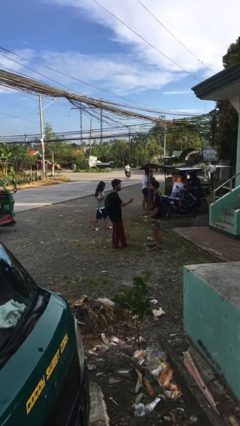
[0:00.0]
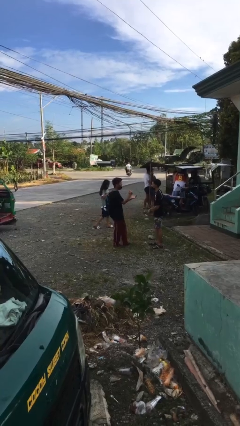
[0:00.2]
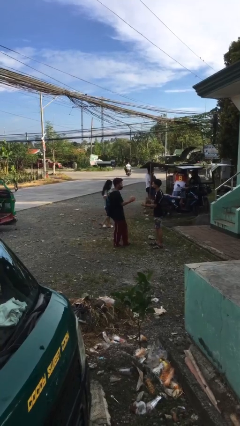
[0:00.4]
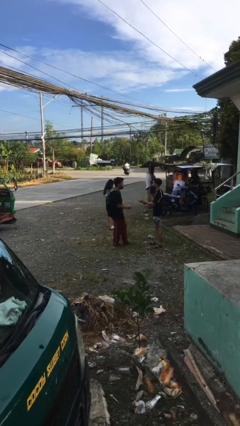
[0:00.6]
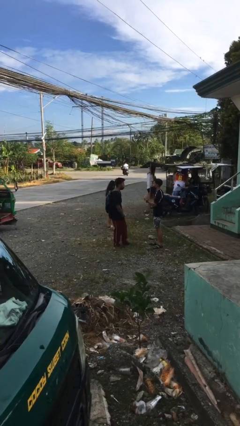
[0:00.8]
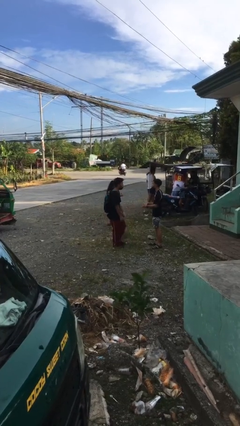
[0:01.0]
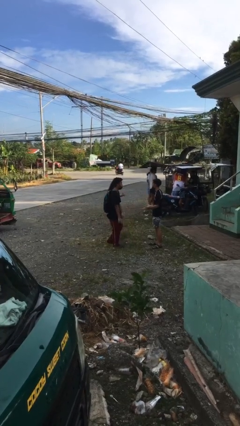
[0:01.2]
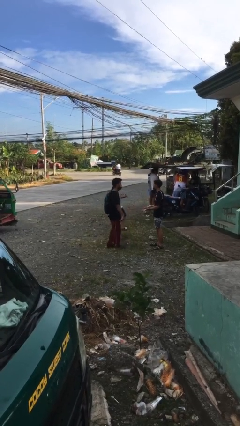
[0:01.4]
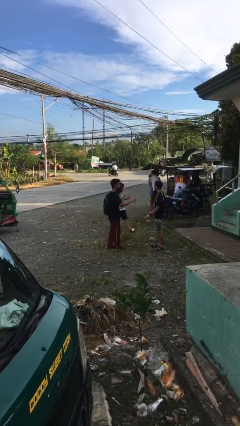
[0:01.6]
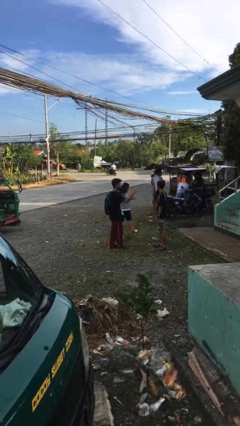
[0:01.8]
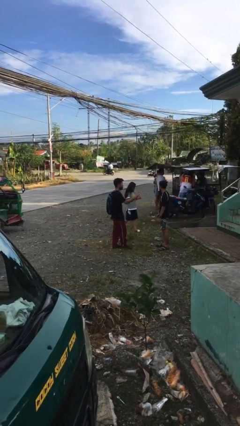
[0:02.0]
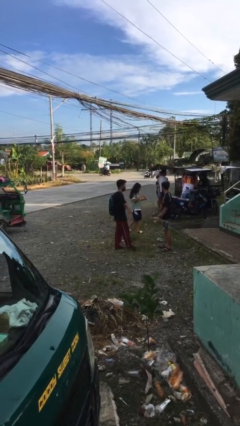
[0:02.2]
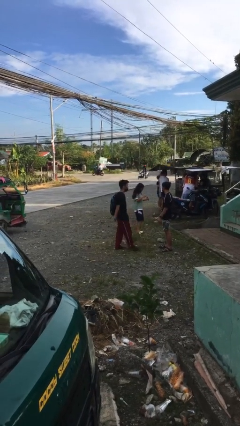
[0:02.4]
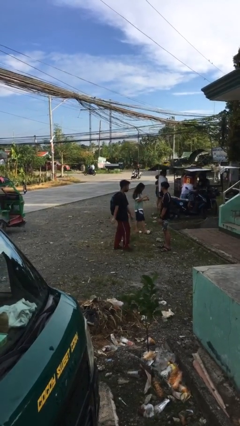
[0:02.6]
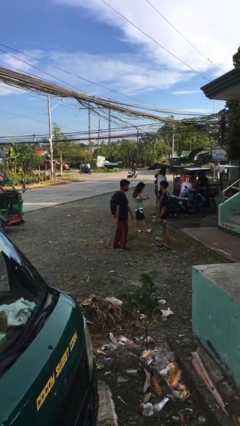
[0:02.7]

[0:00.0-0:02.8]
person talks to person

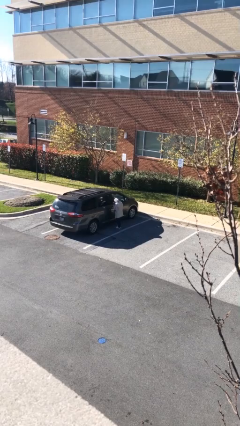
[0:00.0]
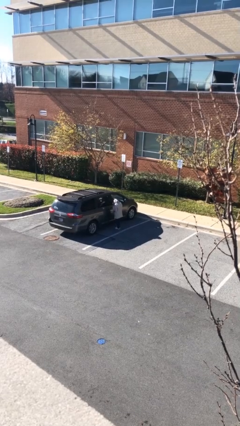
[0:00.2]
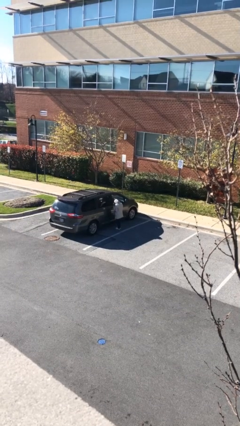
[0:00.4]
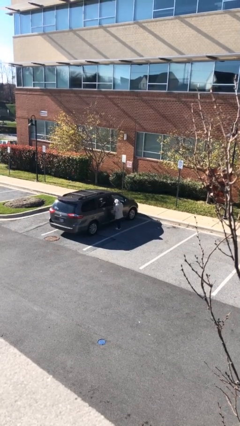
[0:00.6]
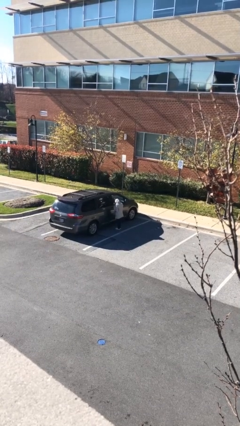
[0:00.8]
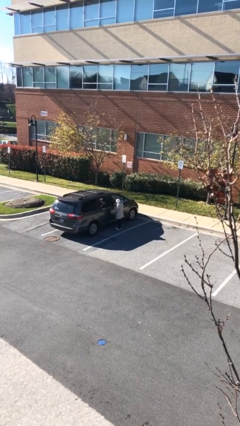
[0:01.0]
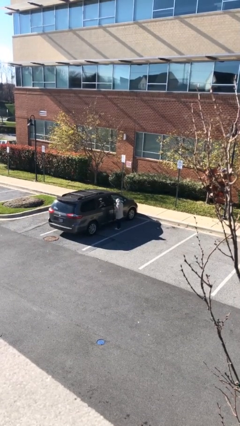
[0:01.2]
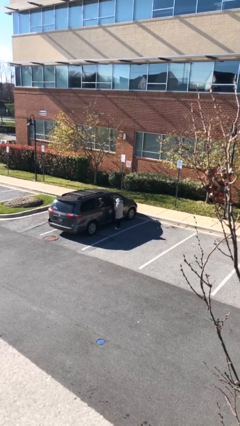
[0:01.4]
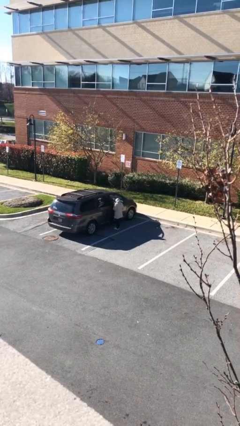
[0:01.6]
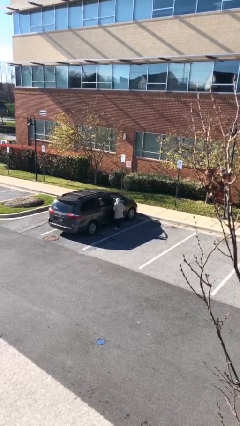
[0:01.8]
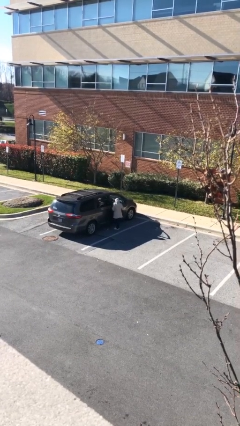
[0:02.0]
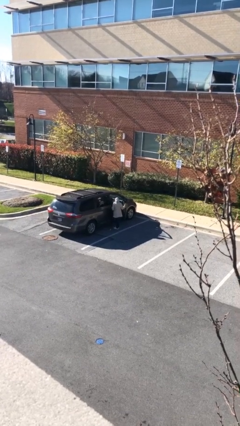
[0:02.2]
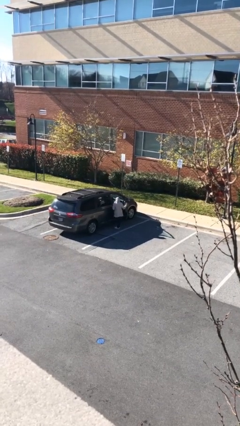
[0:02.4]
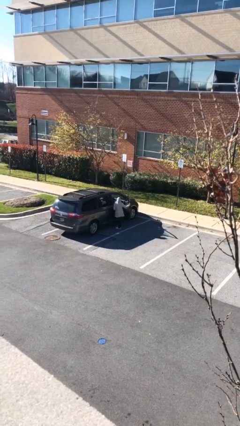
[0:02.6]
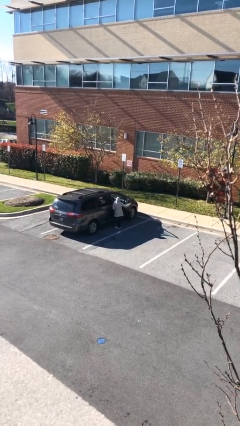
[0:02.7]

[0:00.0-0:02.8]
person opens car door

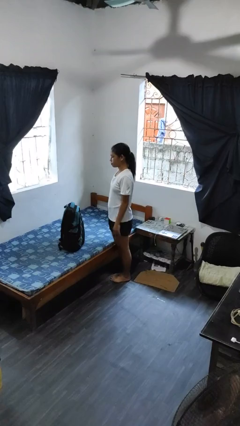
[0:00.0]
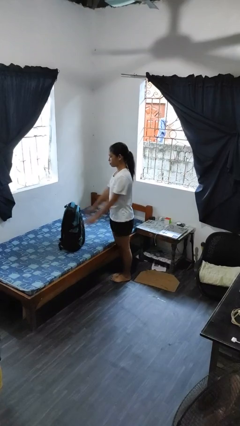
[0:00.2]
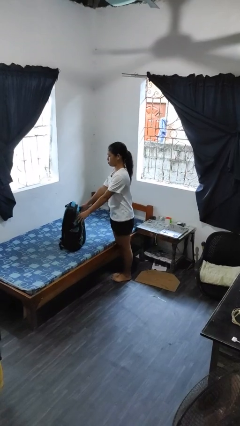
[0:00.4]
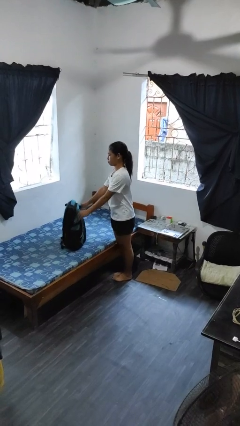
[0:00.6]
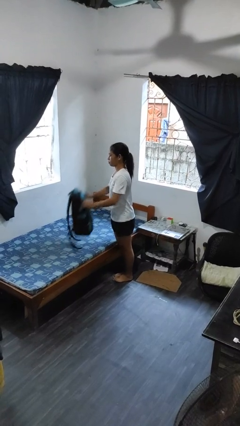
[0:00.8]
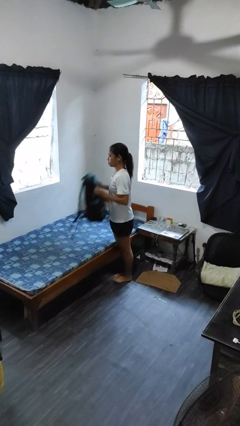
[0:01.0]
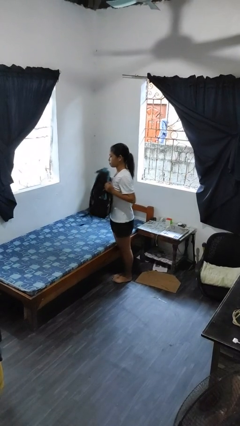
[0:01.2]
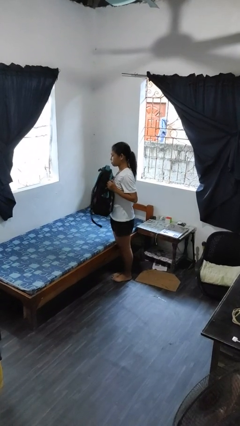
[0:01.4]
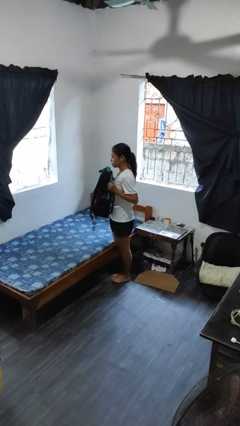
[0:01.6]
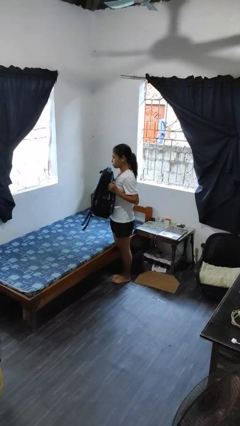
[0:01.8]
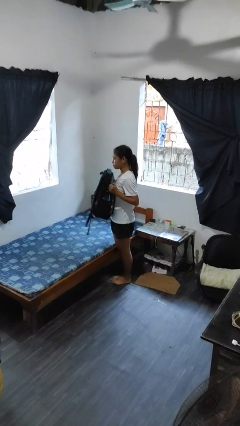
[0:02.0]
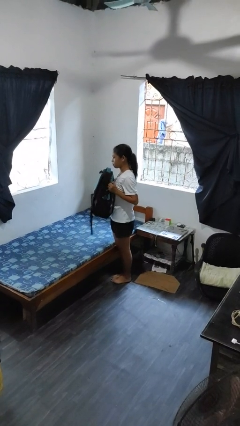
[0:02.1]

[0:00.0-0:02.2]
person picks up object from bed

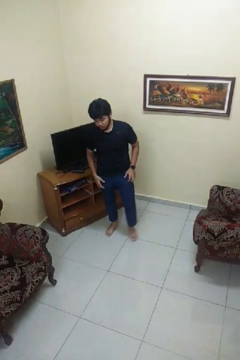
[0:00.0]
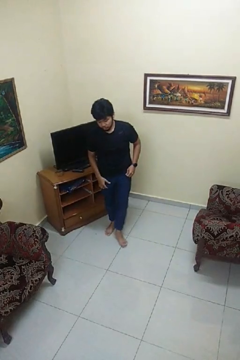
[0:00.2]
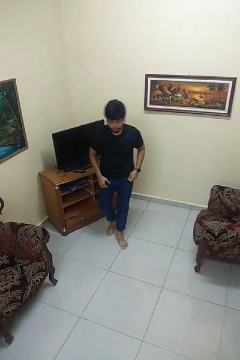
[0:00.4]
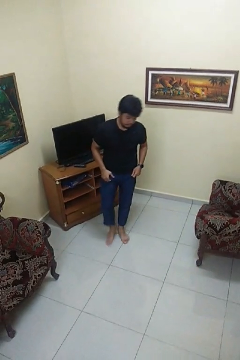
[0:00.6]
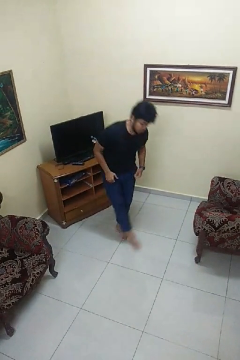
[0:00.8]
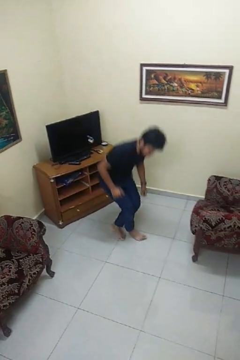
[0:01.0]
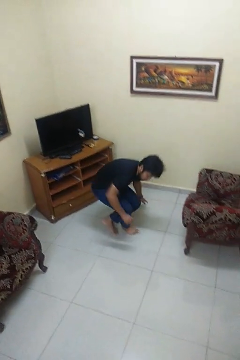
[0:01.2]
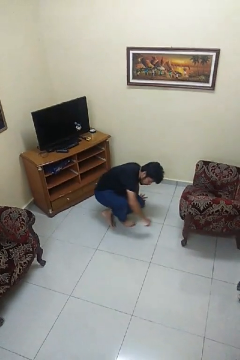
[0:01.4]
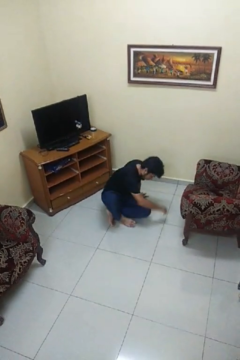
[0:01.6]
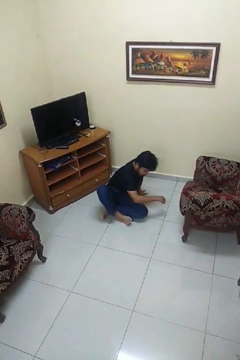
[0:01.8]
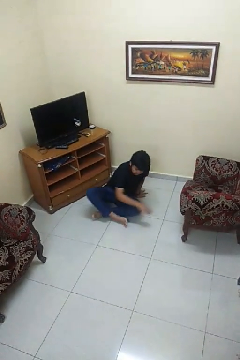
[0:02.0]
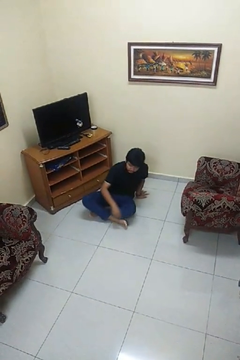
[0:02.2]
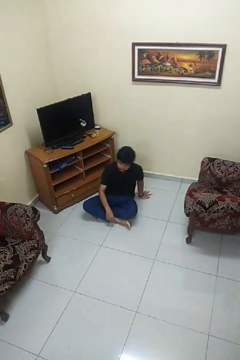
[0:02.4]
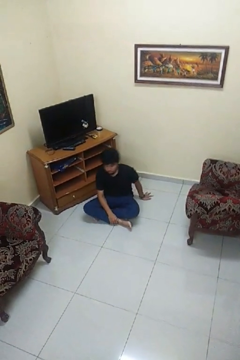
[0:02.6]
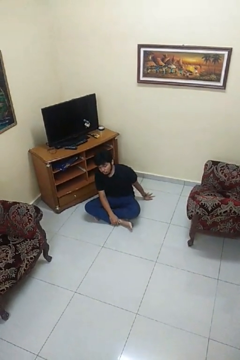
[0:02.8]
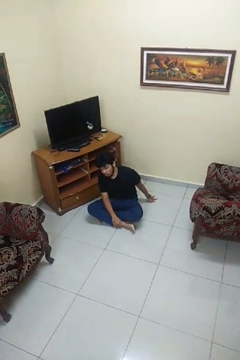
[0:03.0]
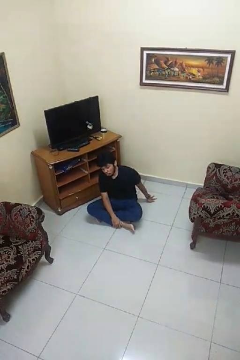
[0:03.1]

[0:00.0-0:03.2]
person sits crisscross

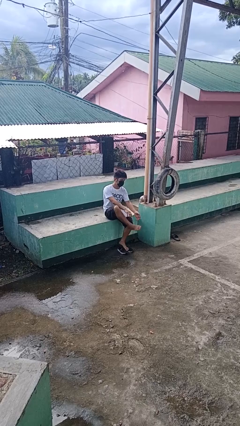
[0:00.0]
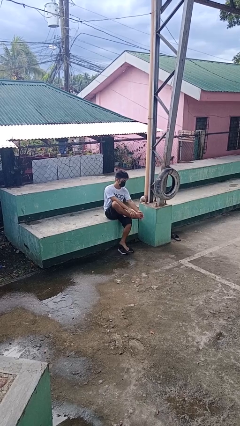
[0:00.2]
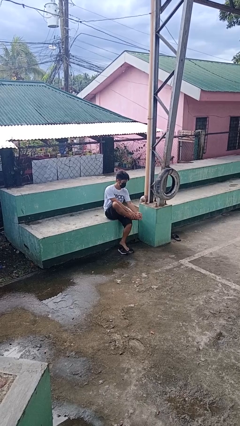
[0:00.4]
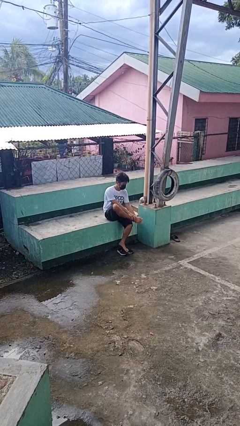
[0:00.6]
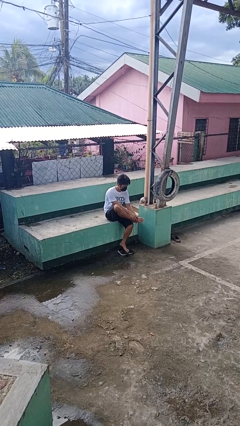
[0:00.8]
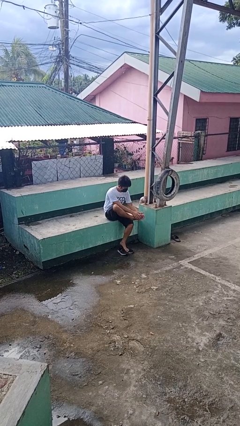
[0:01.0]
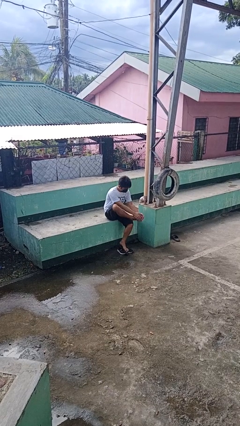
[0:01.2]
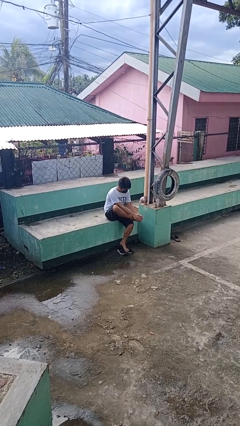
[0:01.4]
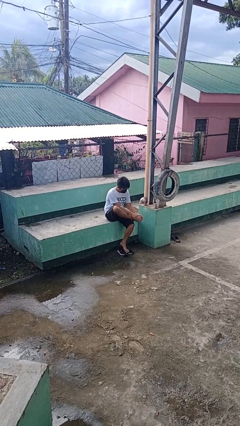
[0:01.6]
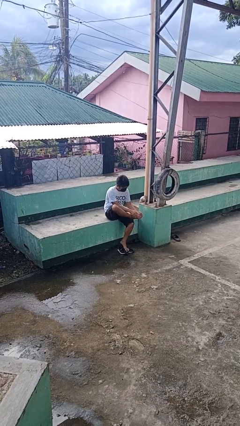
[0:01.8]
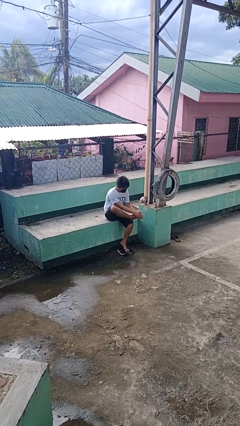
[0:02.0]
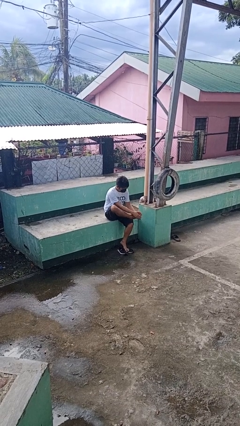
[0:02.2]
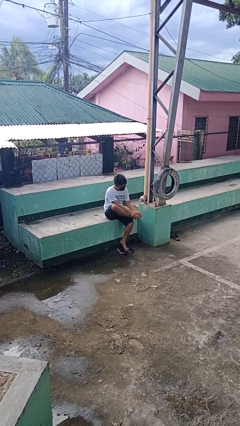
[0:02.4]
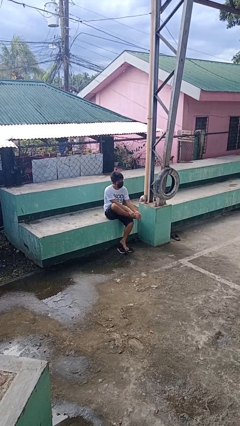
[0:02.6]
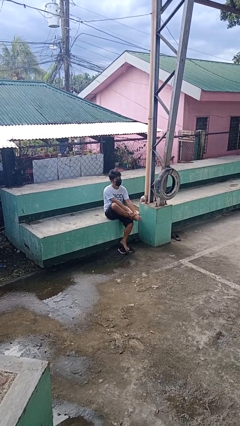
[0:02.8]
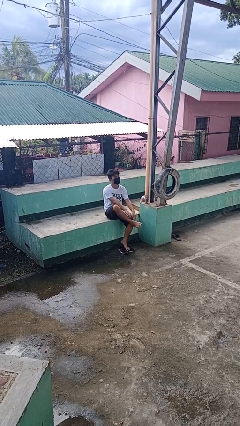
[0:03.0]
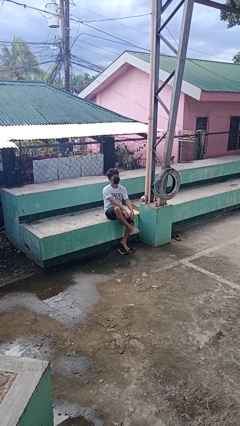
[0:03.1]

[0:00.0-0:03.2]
person rubs foot

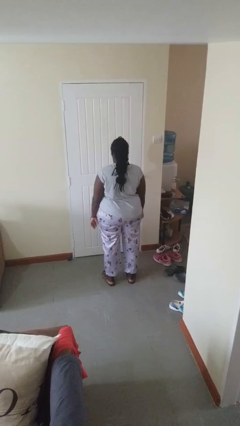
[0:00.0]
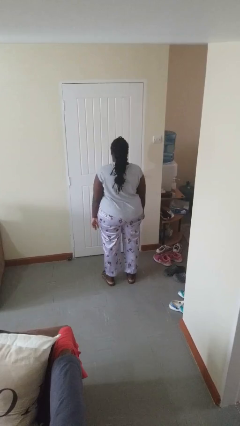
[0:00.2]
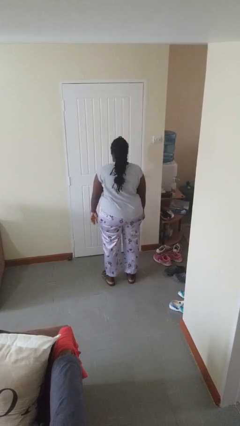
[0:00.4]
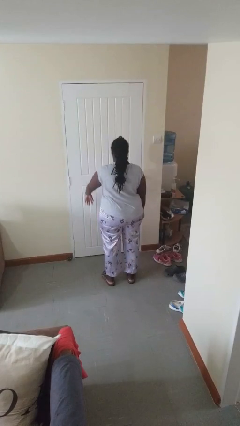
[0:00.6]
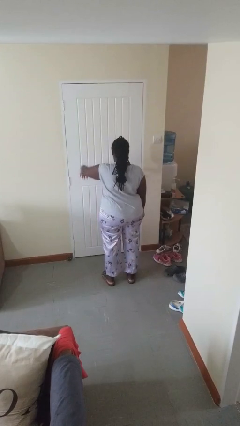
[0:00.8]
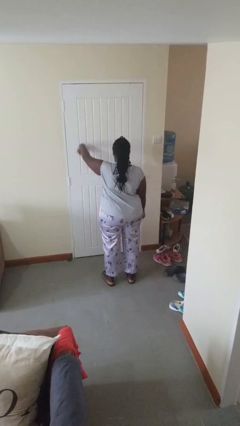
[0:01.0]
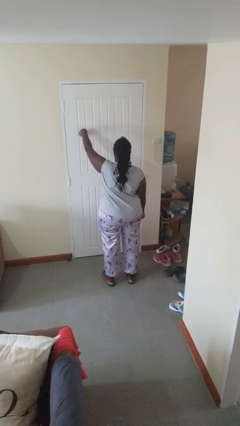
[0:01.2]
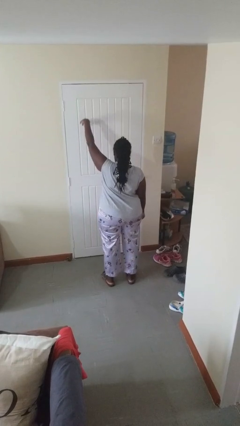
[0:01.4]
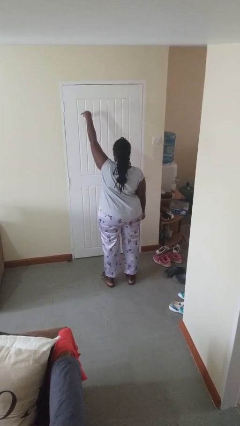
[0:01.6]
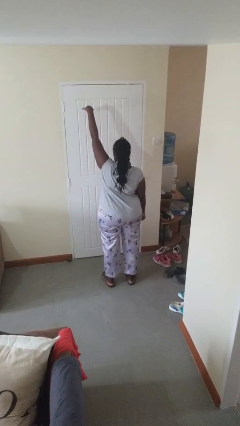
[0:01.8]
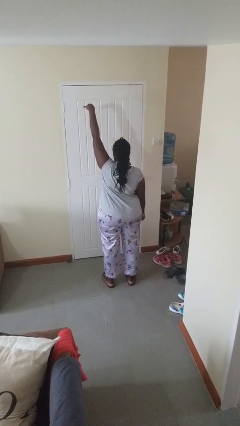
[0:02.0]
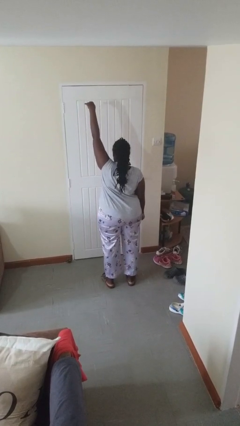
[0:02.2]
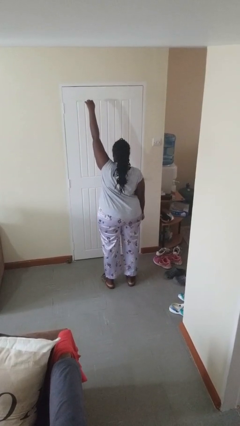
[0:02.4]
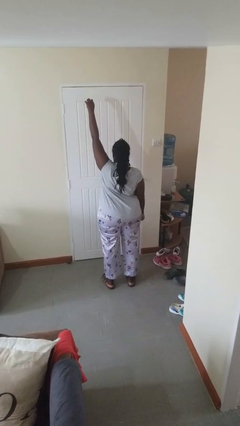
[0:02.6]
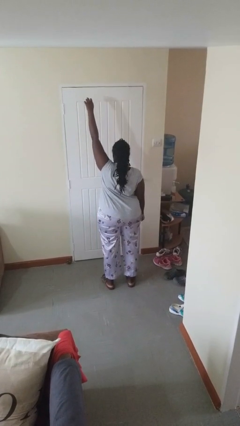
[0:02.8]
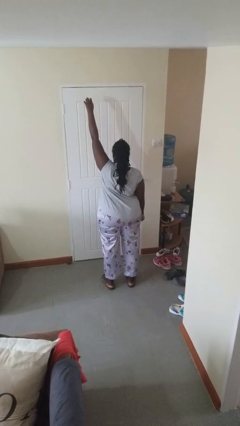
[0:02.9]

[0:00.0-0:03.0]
person gestures swipe up

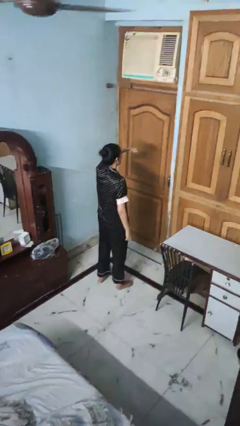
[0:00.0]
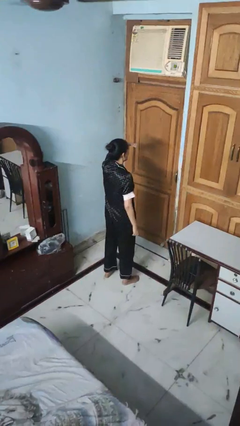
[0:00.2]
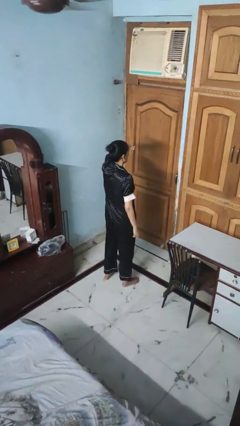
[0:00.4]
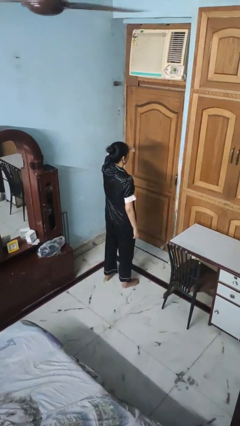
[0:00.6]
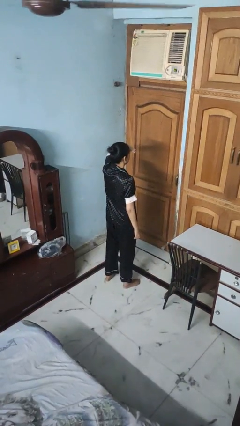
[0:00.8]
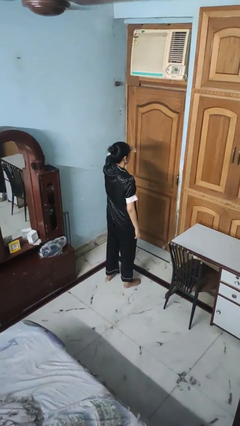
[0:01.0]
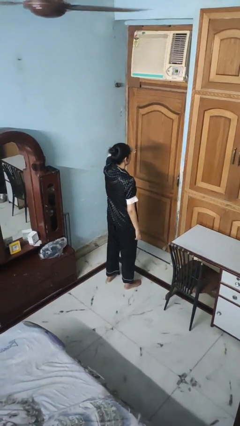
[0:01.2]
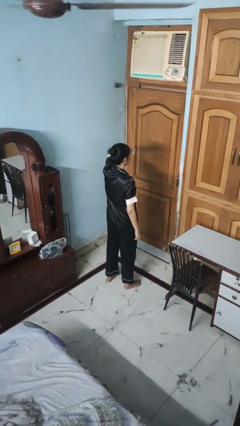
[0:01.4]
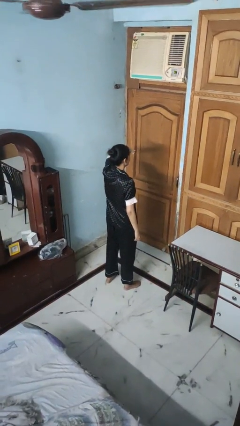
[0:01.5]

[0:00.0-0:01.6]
person shades eyes
